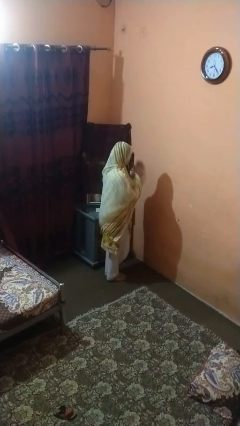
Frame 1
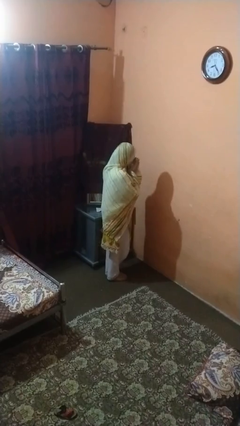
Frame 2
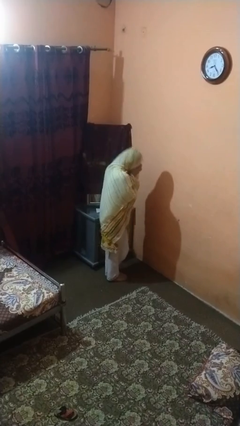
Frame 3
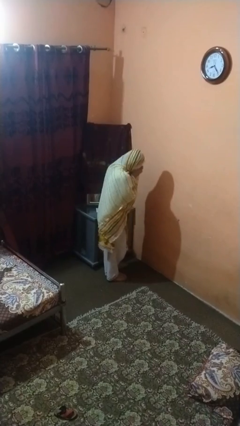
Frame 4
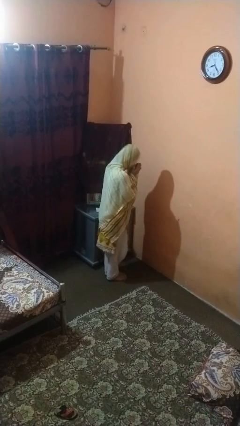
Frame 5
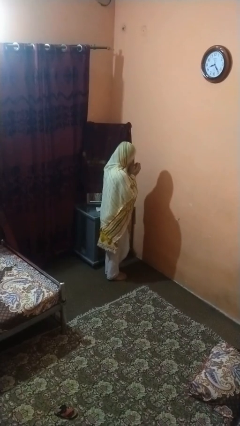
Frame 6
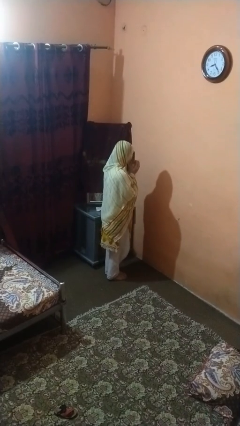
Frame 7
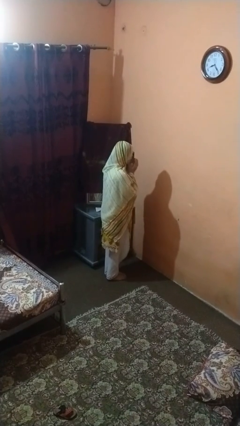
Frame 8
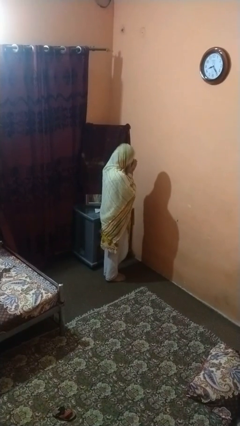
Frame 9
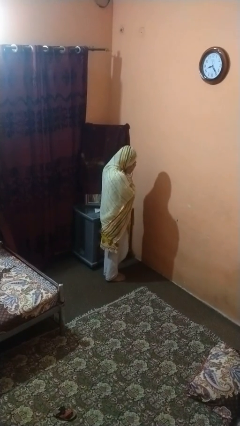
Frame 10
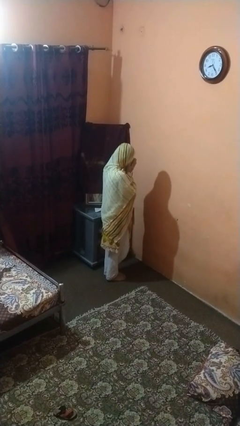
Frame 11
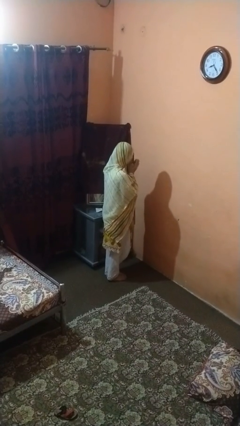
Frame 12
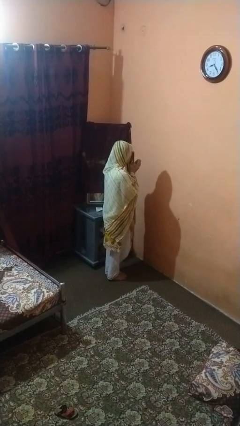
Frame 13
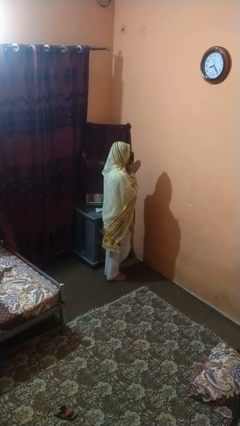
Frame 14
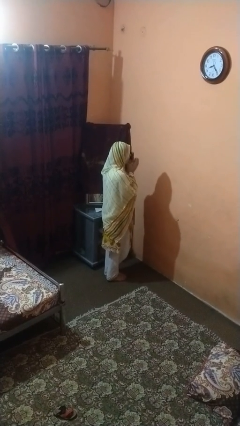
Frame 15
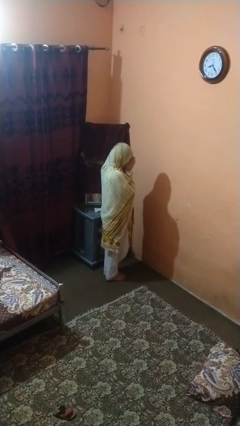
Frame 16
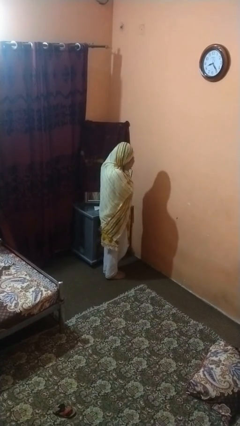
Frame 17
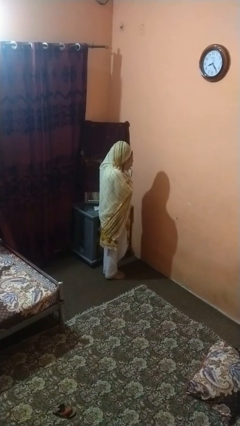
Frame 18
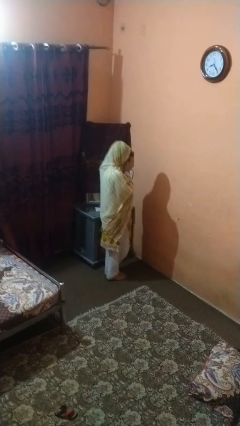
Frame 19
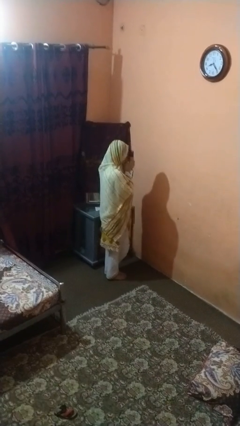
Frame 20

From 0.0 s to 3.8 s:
person sneezes into hand

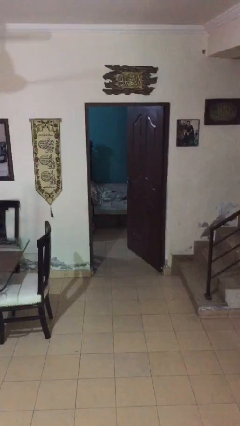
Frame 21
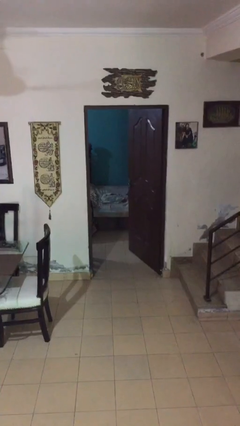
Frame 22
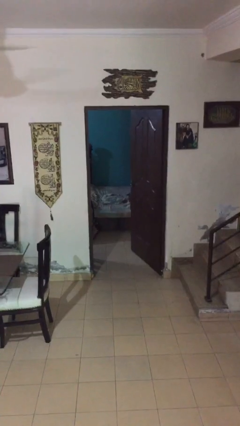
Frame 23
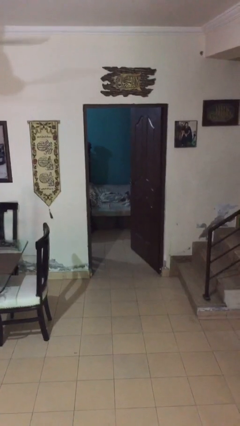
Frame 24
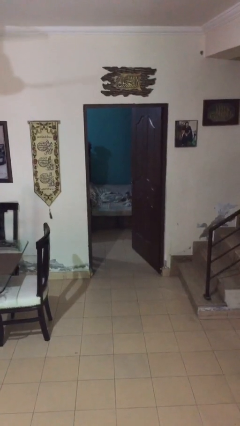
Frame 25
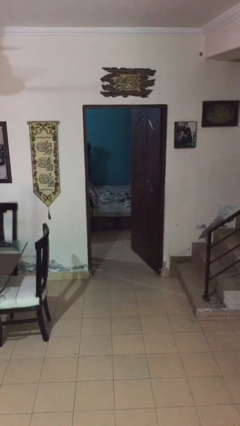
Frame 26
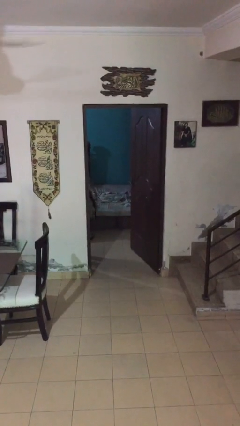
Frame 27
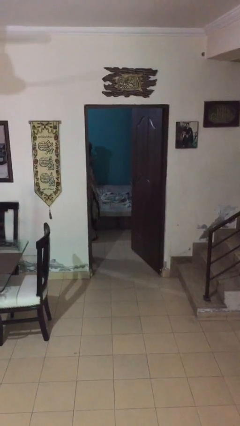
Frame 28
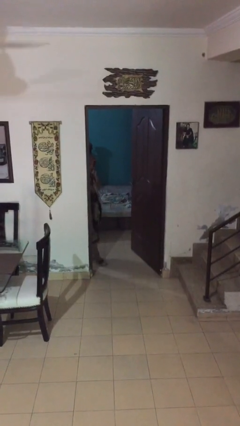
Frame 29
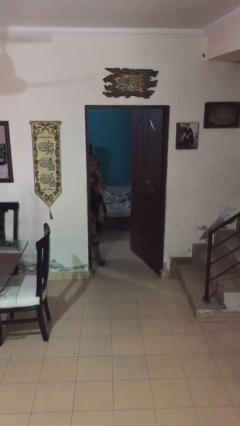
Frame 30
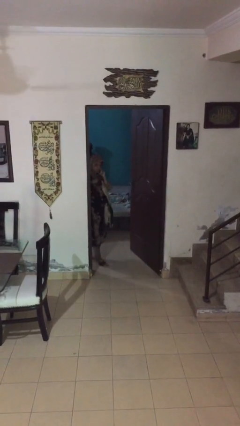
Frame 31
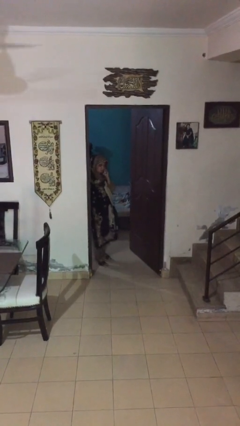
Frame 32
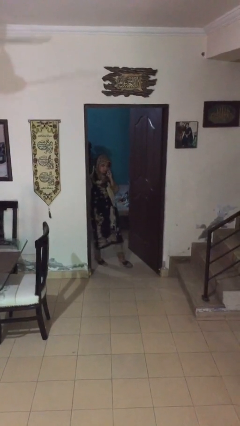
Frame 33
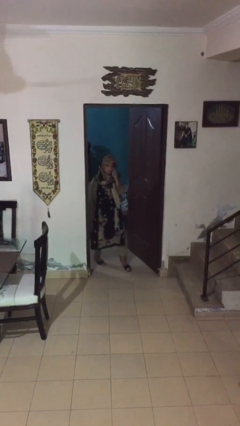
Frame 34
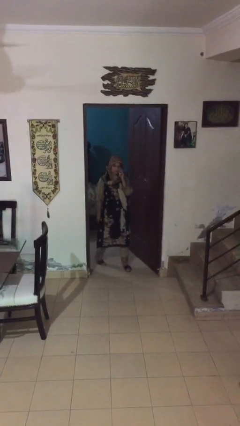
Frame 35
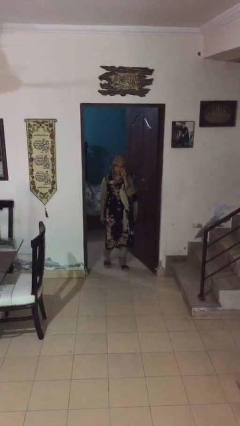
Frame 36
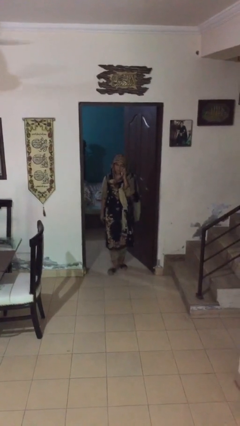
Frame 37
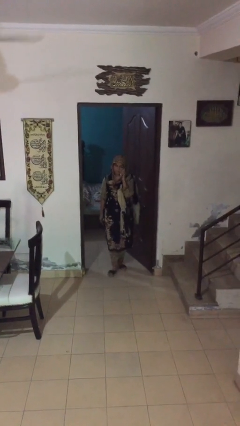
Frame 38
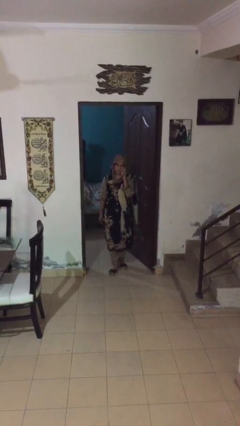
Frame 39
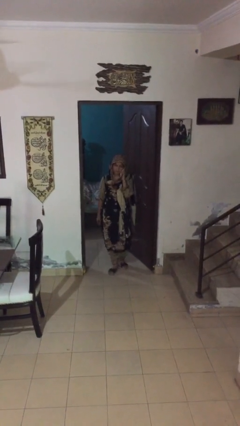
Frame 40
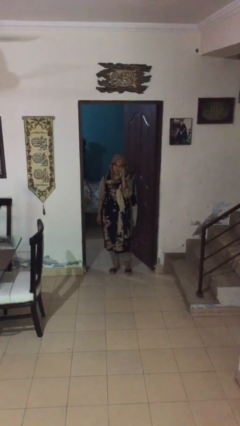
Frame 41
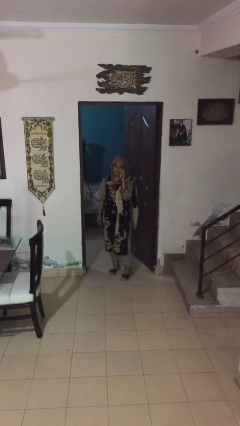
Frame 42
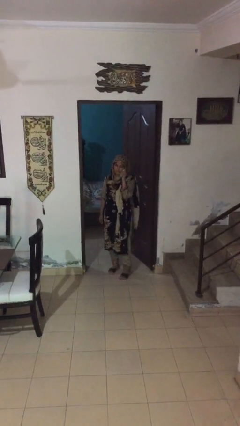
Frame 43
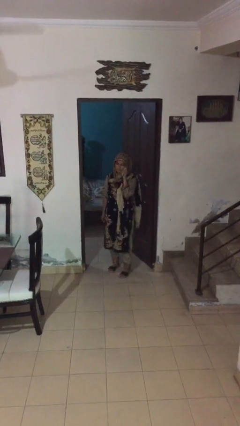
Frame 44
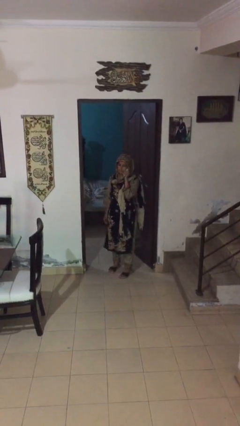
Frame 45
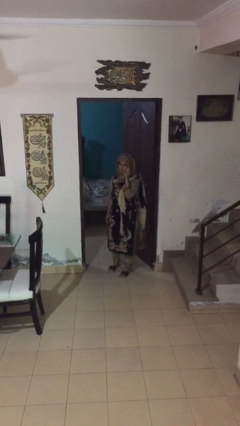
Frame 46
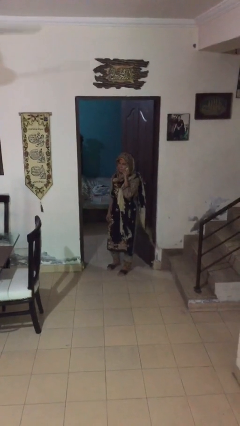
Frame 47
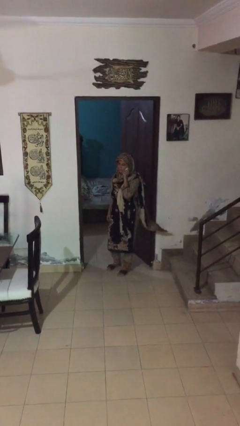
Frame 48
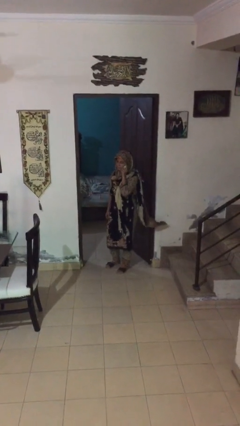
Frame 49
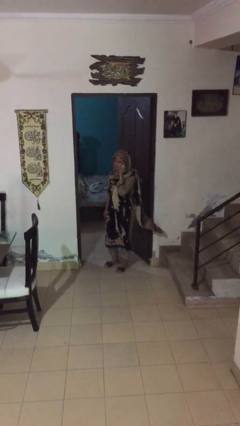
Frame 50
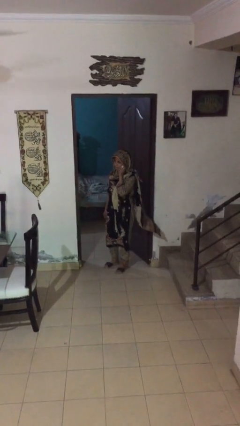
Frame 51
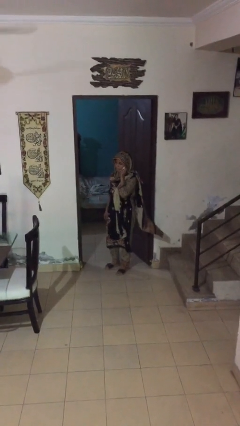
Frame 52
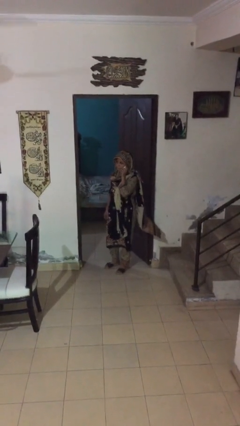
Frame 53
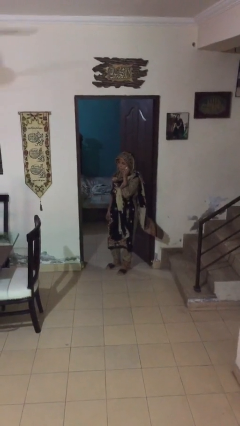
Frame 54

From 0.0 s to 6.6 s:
person enters scene through structure

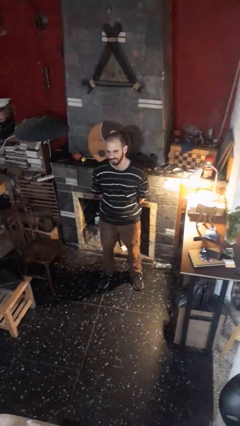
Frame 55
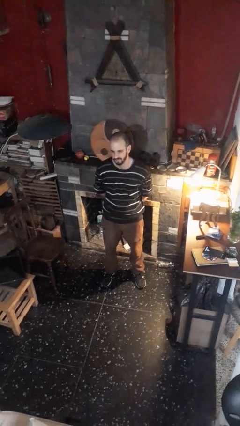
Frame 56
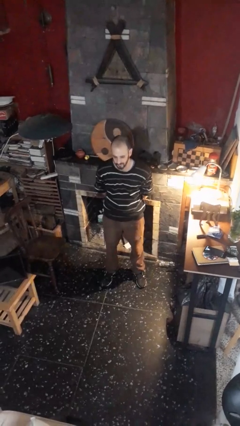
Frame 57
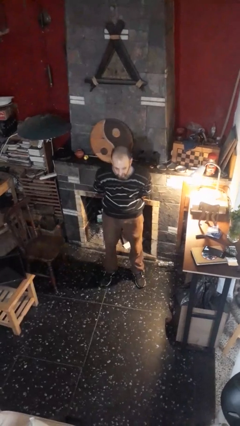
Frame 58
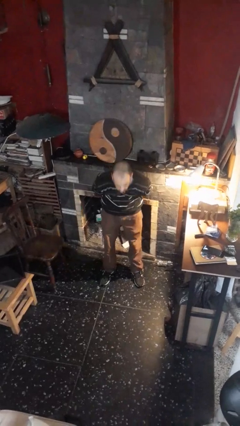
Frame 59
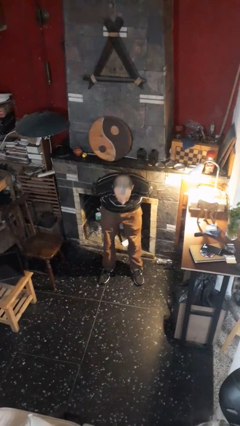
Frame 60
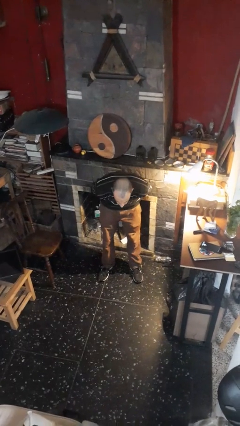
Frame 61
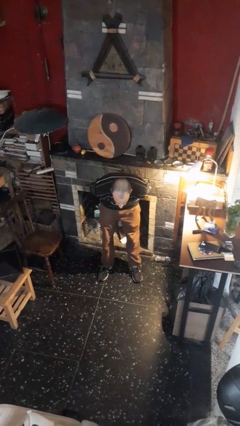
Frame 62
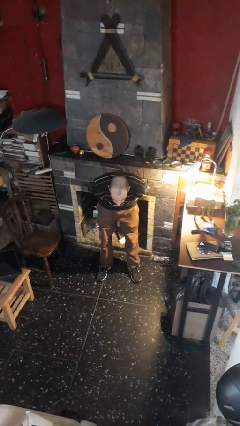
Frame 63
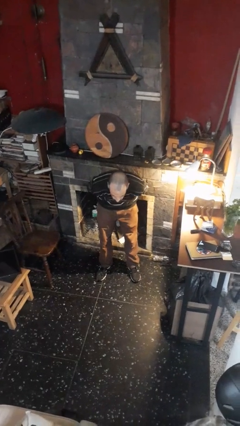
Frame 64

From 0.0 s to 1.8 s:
person bows

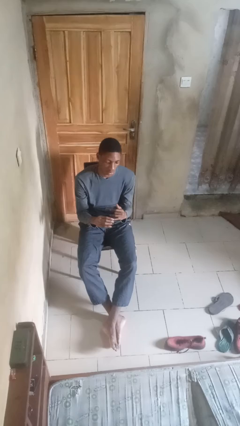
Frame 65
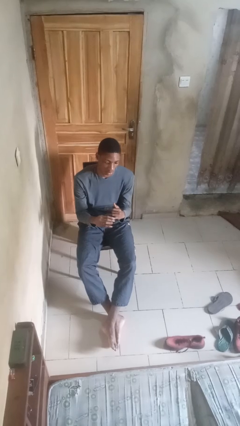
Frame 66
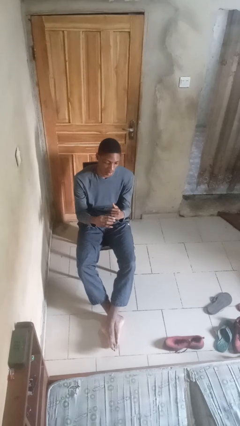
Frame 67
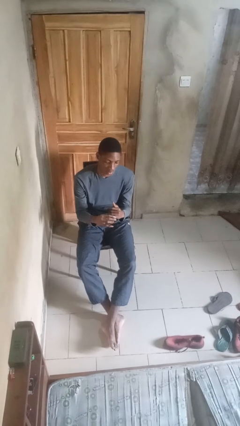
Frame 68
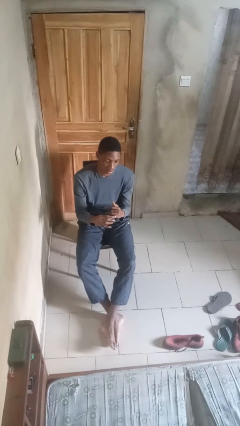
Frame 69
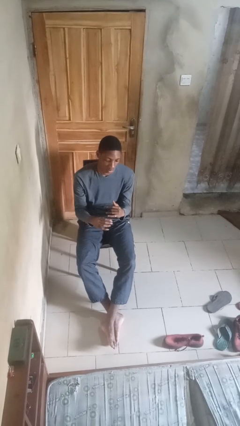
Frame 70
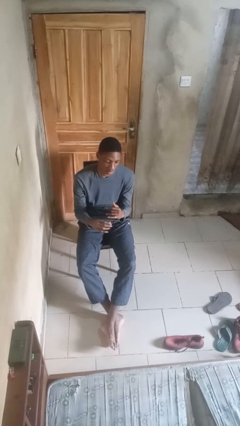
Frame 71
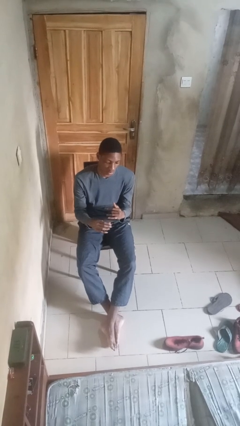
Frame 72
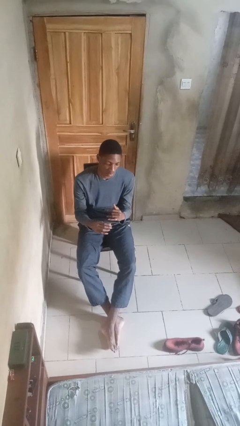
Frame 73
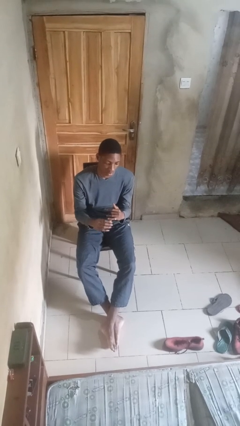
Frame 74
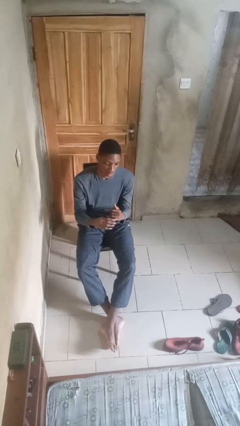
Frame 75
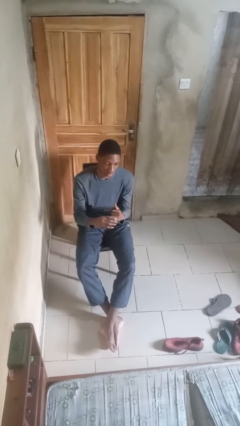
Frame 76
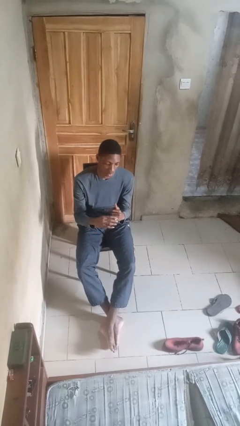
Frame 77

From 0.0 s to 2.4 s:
person puts on ring

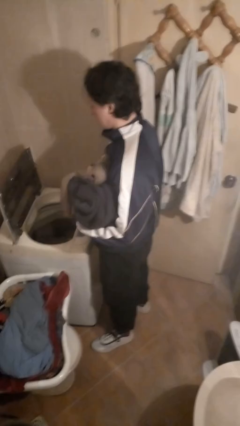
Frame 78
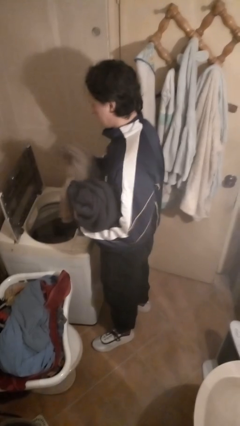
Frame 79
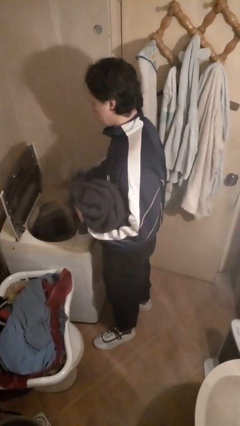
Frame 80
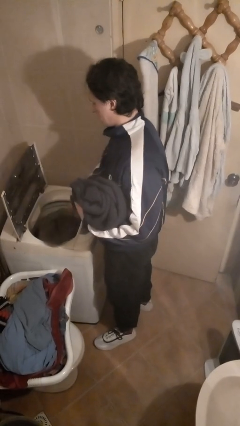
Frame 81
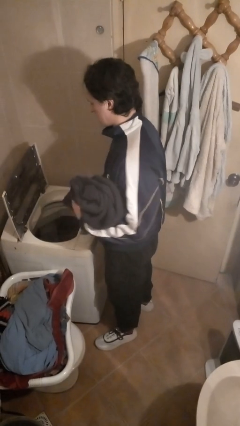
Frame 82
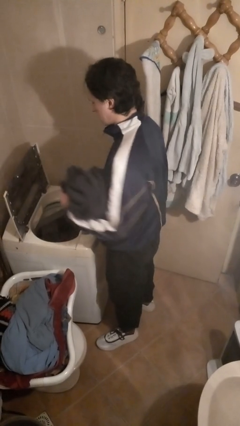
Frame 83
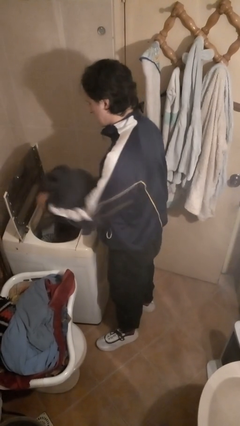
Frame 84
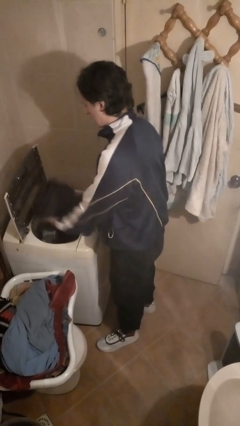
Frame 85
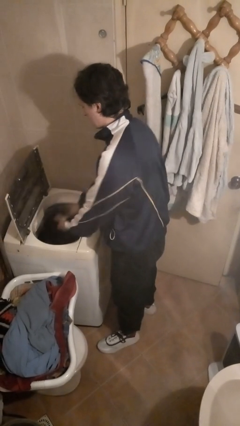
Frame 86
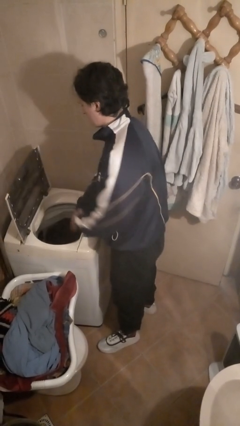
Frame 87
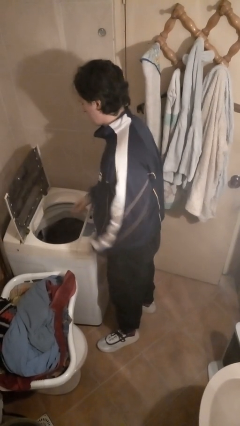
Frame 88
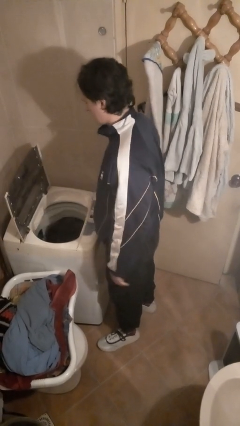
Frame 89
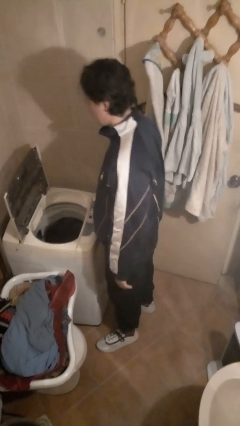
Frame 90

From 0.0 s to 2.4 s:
person loads clotheswasher

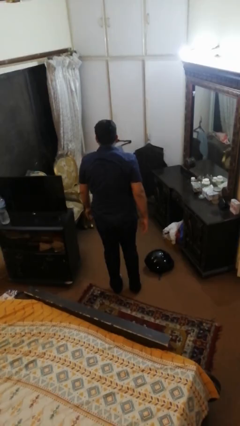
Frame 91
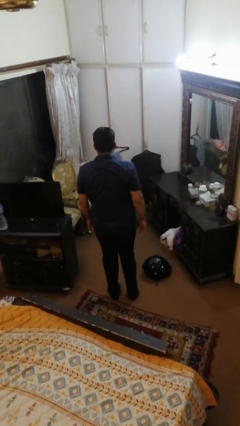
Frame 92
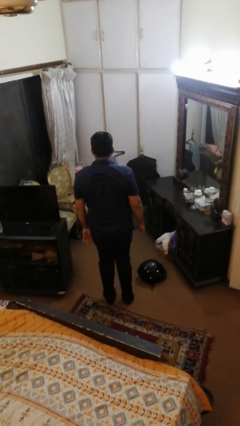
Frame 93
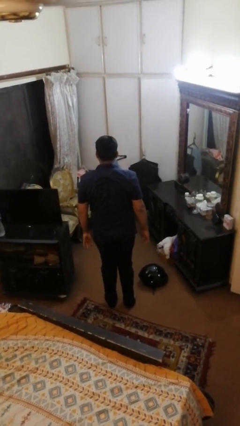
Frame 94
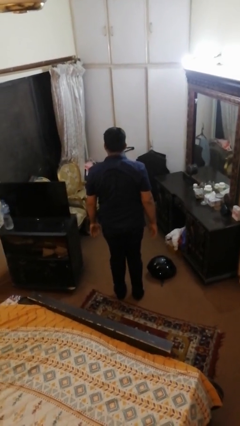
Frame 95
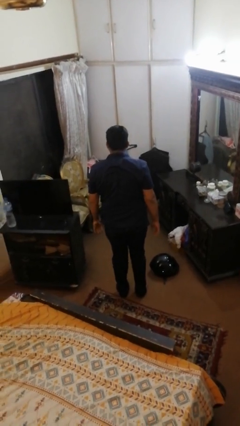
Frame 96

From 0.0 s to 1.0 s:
person stands up from floor
